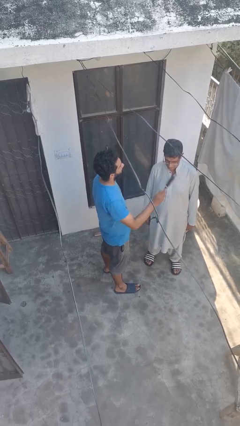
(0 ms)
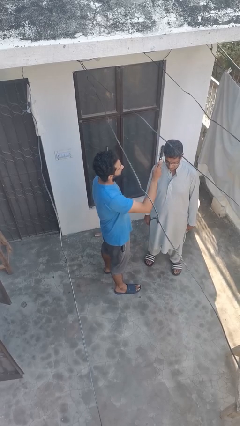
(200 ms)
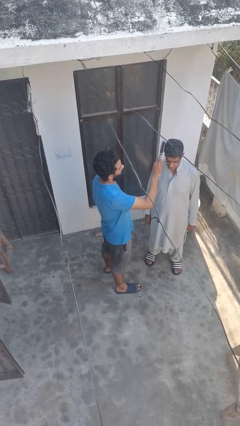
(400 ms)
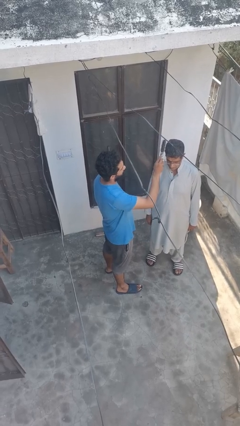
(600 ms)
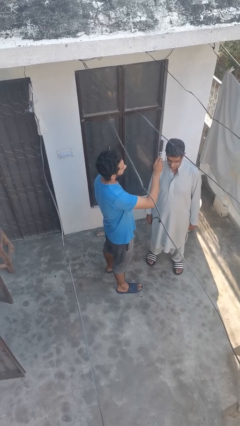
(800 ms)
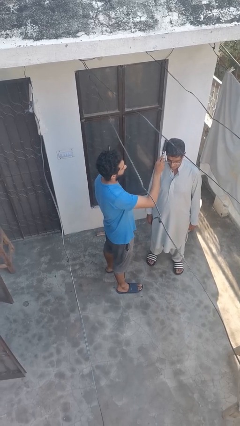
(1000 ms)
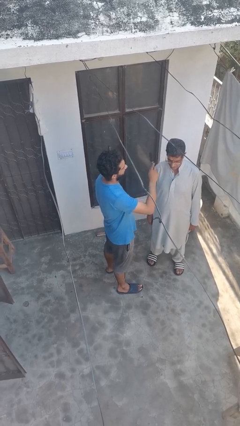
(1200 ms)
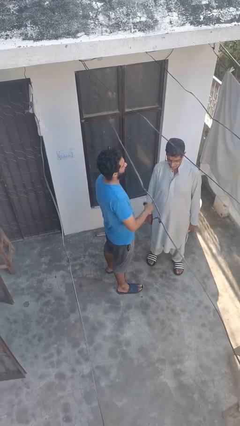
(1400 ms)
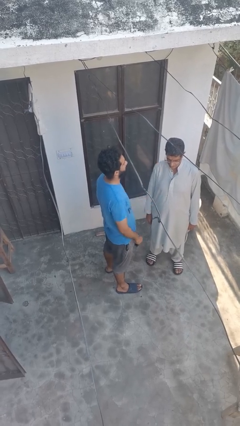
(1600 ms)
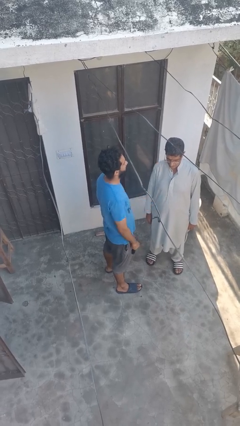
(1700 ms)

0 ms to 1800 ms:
person brushes hair of person

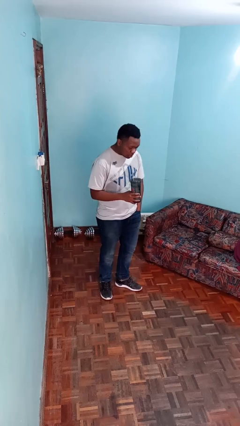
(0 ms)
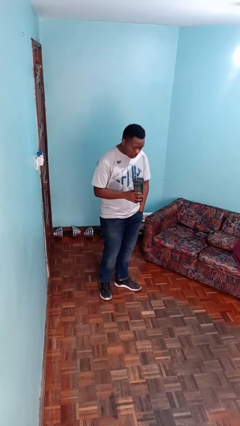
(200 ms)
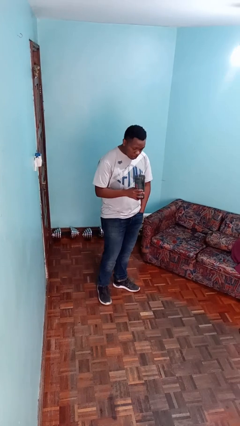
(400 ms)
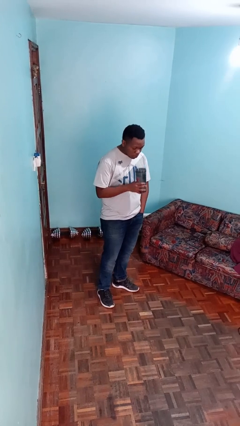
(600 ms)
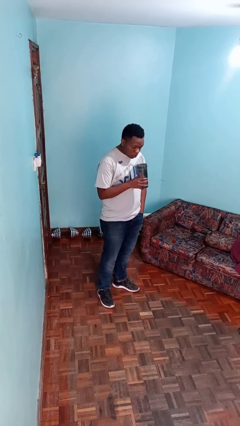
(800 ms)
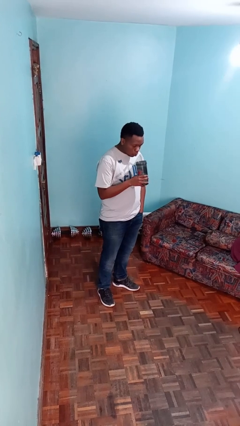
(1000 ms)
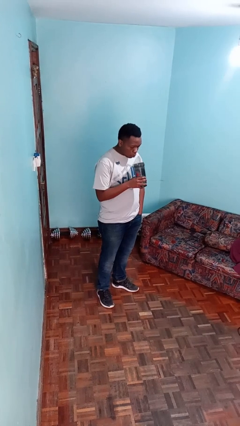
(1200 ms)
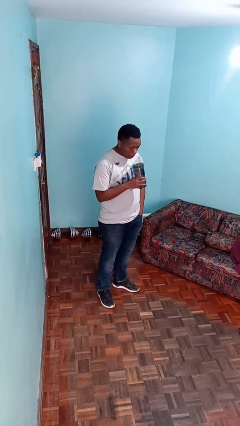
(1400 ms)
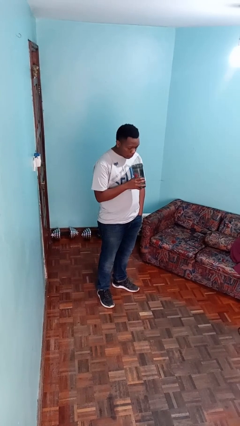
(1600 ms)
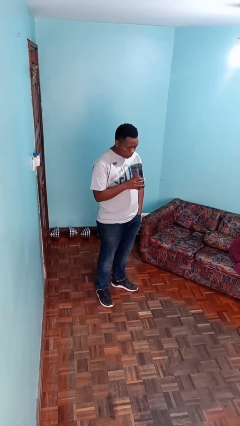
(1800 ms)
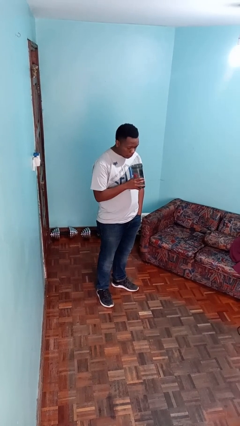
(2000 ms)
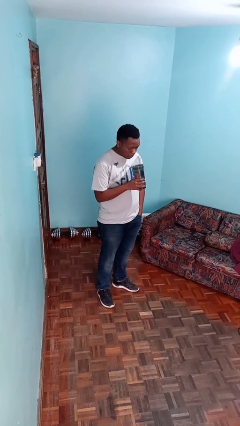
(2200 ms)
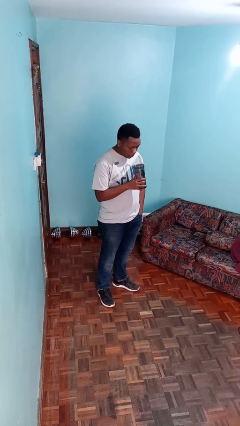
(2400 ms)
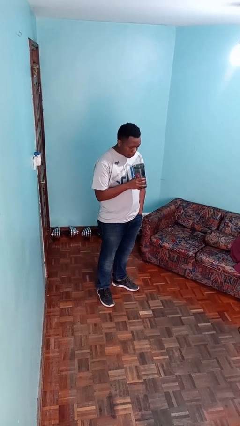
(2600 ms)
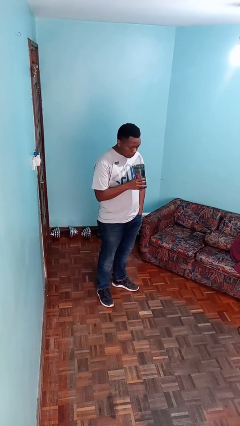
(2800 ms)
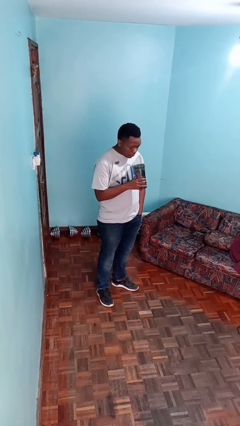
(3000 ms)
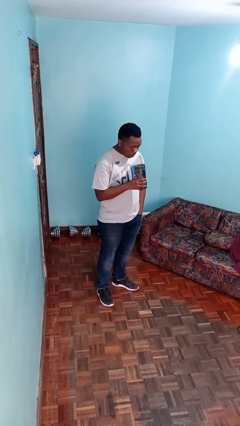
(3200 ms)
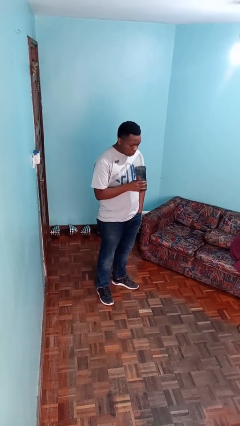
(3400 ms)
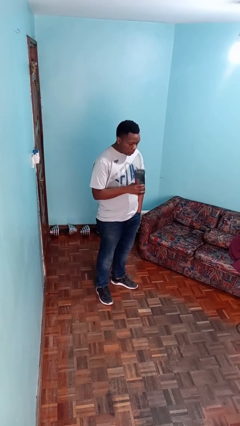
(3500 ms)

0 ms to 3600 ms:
person drinks from straw

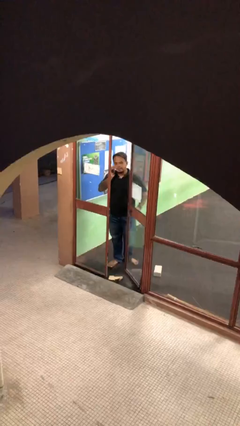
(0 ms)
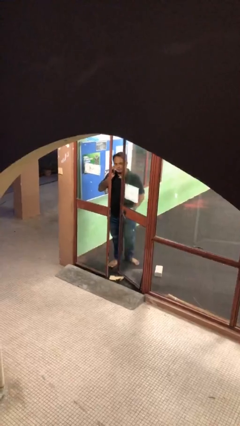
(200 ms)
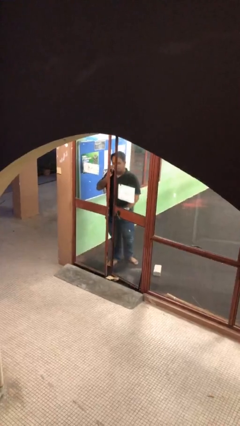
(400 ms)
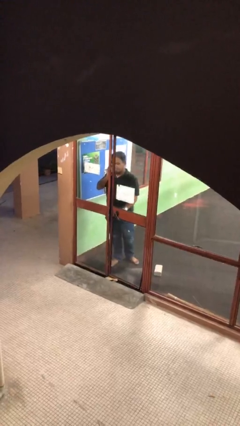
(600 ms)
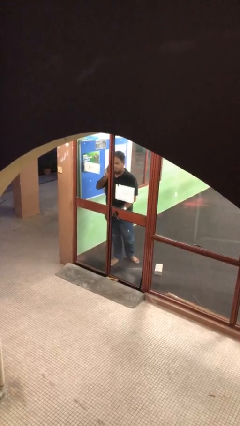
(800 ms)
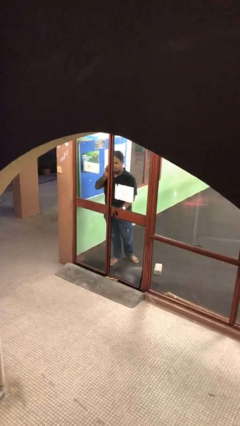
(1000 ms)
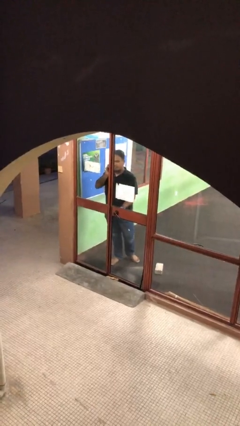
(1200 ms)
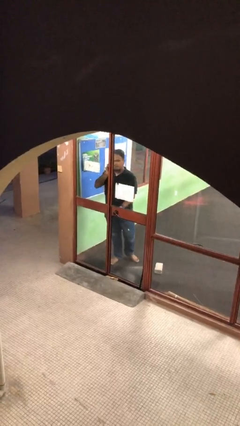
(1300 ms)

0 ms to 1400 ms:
person closes facility door

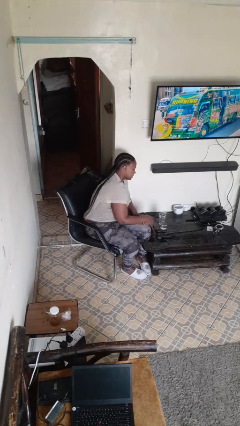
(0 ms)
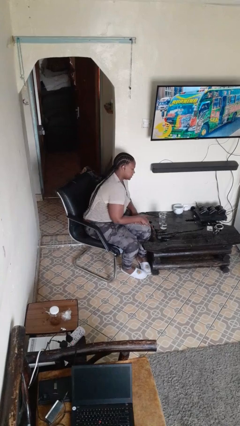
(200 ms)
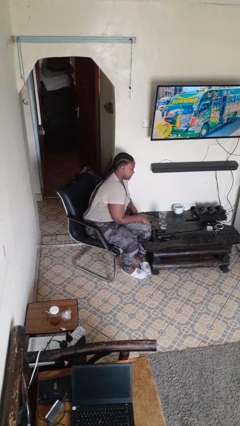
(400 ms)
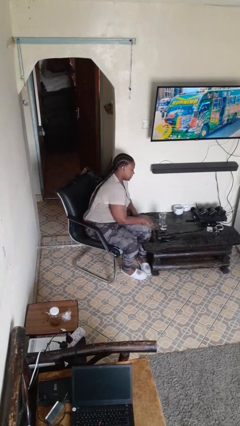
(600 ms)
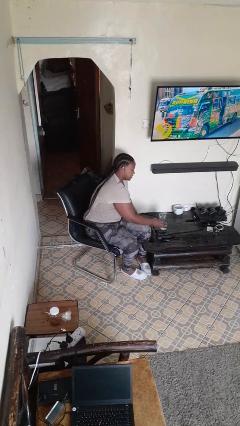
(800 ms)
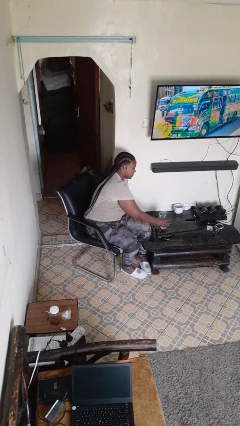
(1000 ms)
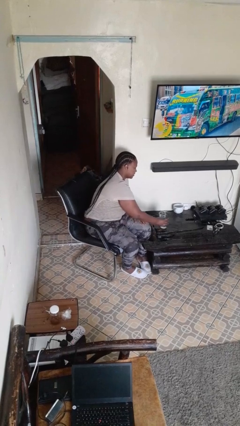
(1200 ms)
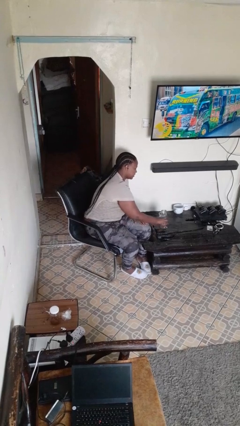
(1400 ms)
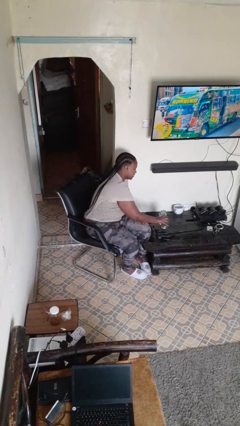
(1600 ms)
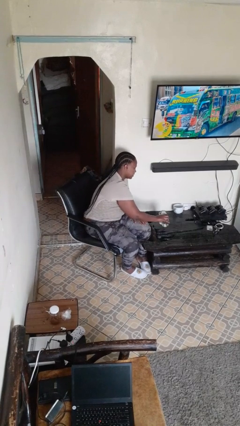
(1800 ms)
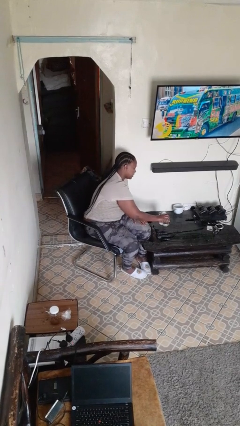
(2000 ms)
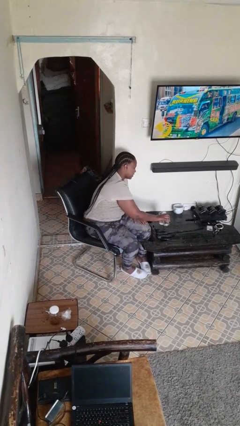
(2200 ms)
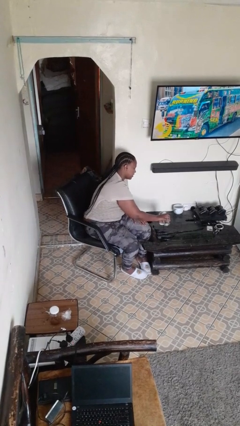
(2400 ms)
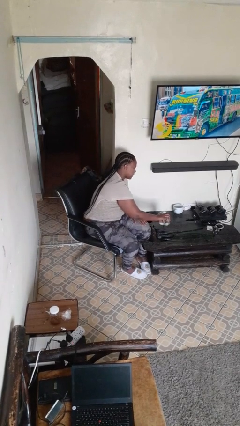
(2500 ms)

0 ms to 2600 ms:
person pours liquid into cup

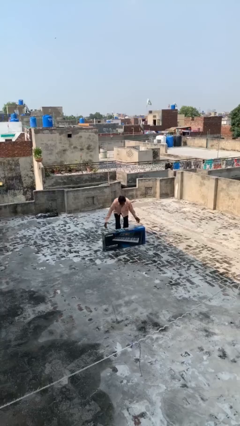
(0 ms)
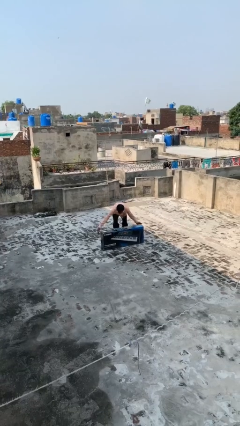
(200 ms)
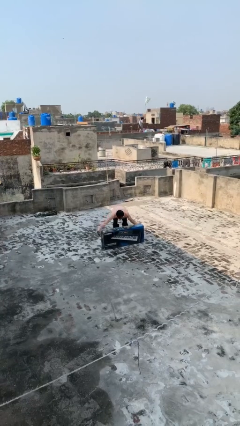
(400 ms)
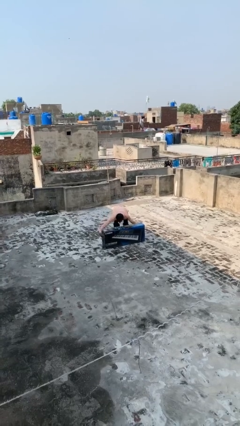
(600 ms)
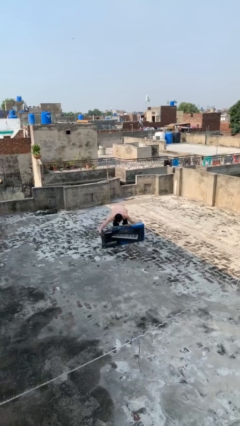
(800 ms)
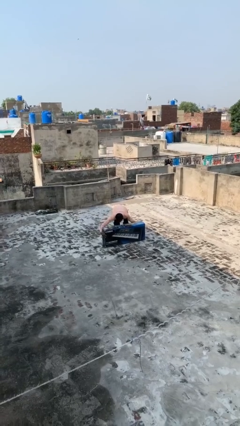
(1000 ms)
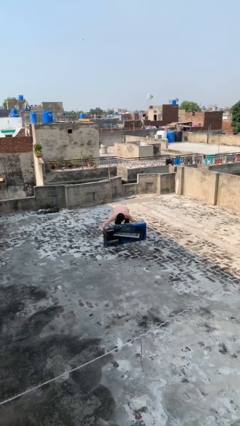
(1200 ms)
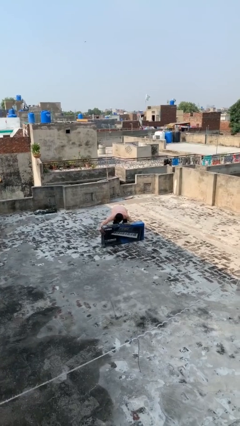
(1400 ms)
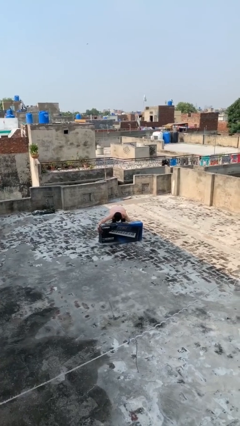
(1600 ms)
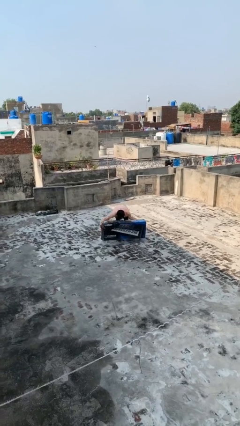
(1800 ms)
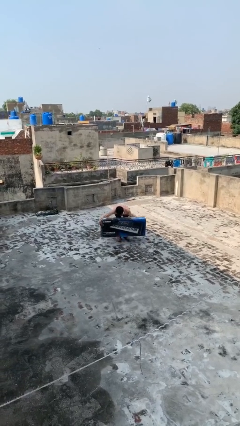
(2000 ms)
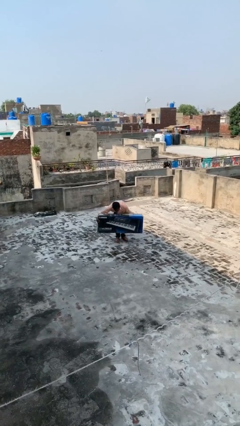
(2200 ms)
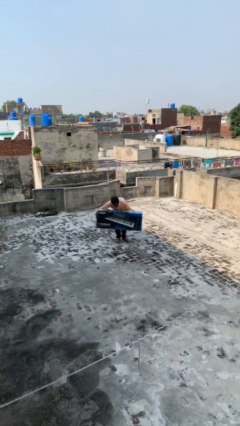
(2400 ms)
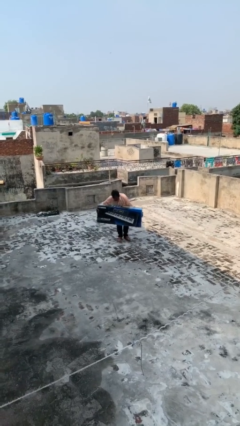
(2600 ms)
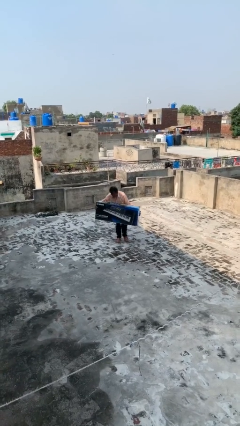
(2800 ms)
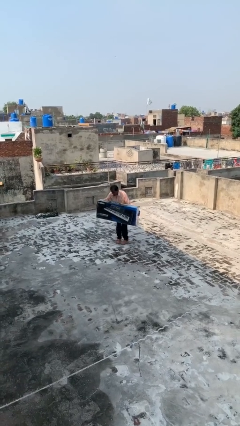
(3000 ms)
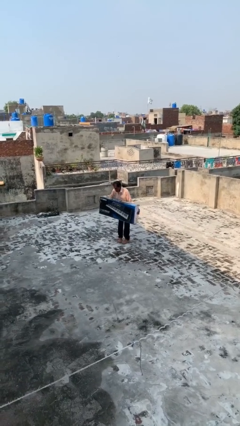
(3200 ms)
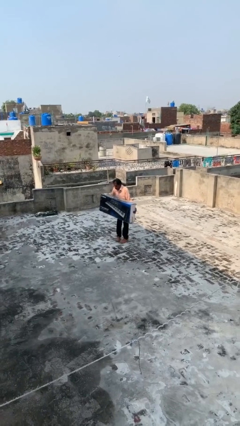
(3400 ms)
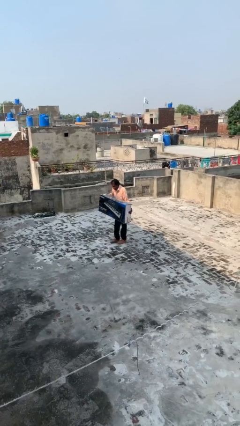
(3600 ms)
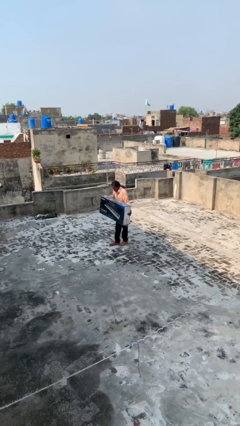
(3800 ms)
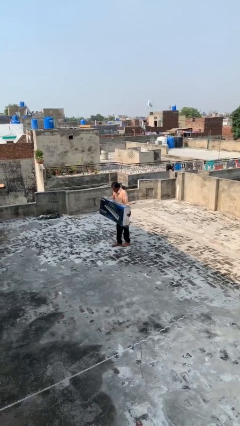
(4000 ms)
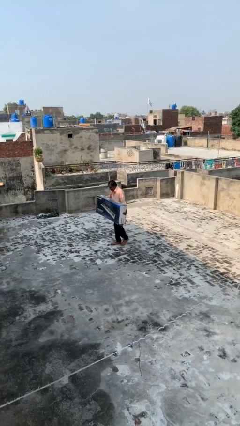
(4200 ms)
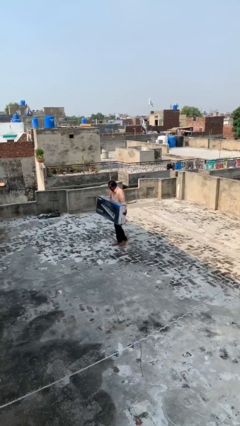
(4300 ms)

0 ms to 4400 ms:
person picks up object from floor

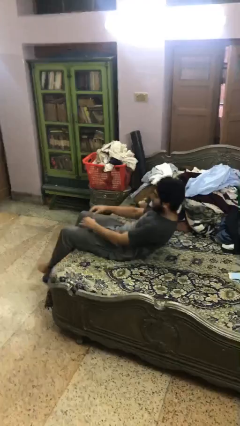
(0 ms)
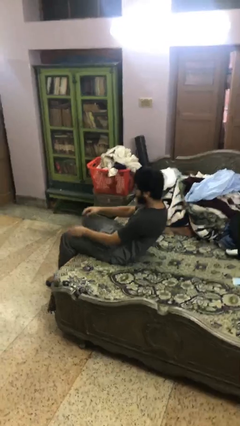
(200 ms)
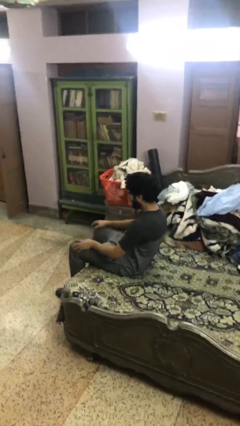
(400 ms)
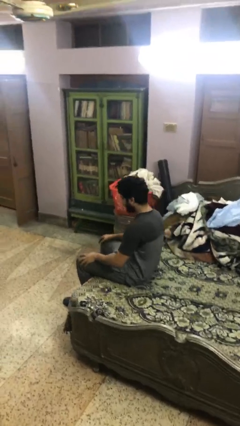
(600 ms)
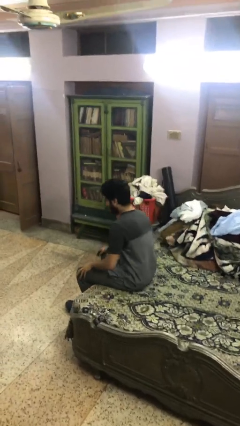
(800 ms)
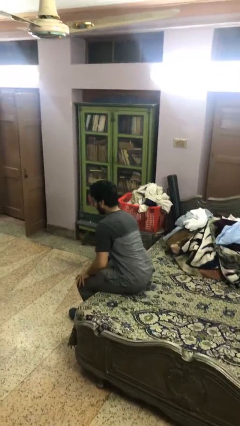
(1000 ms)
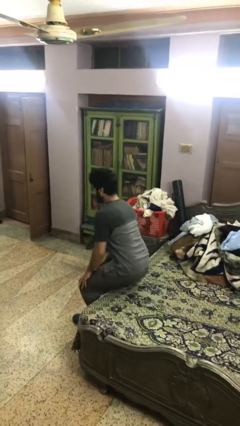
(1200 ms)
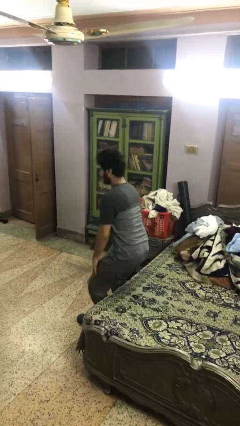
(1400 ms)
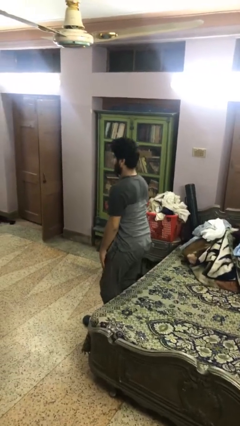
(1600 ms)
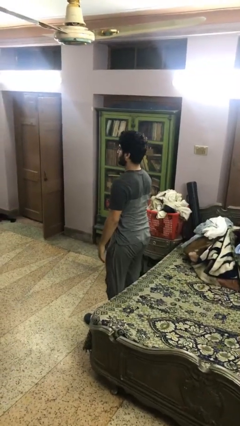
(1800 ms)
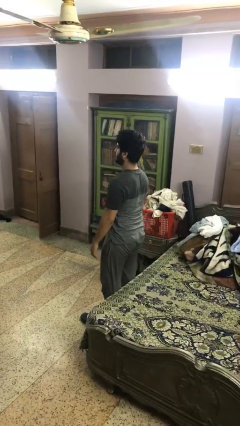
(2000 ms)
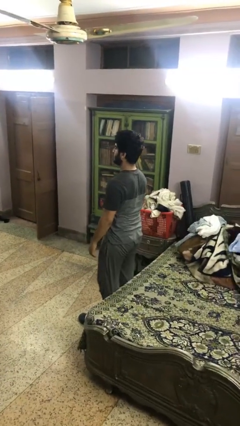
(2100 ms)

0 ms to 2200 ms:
person stands up

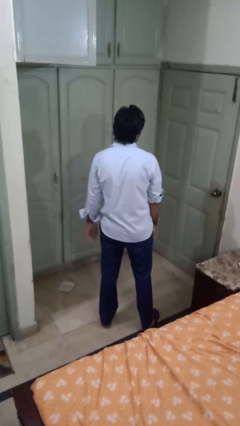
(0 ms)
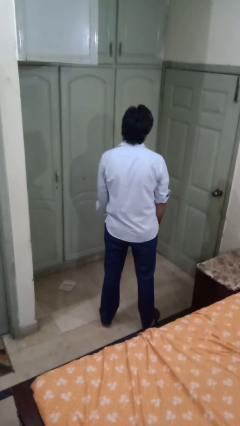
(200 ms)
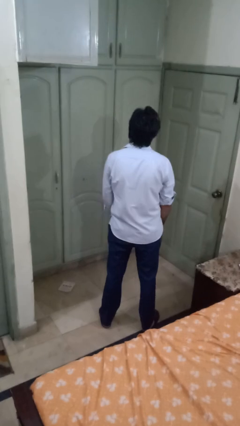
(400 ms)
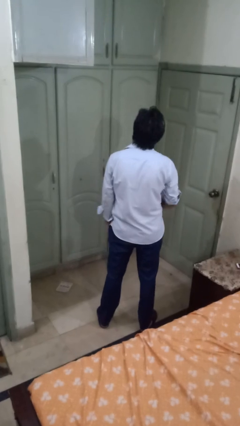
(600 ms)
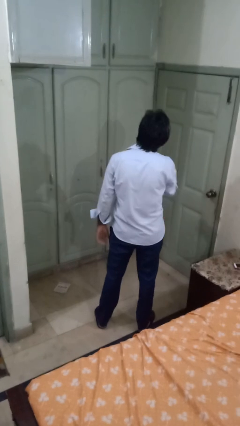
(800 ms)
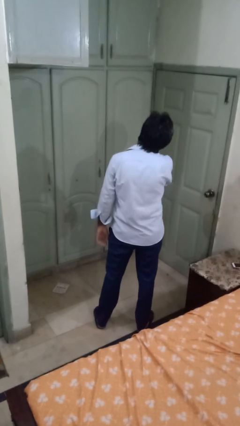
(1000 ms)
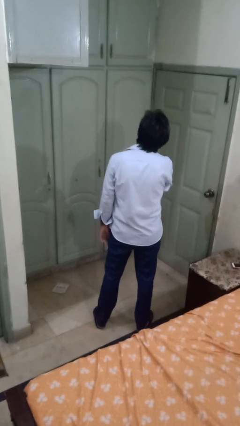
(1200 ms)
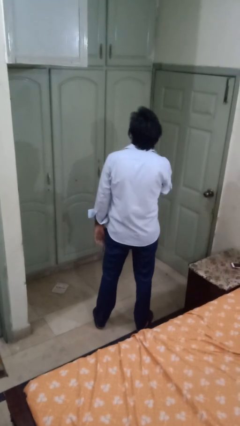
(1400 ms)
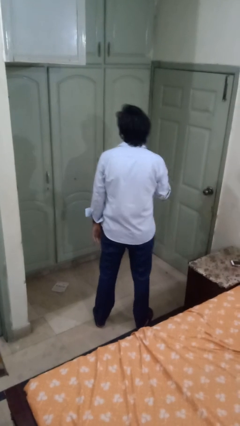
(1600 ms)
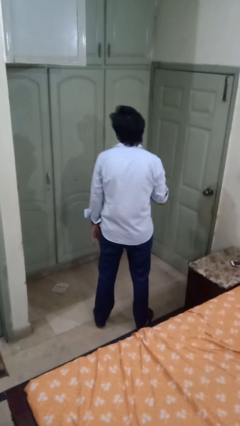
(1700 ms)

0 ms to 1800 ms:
person gestures cut
